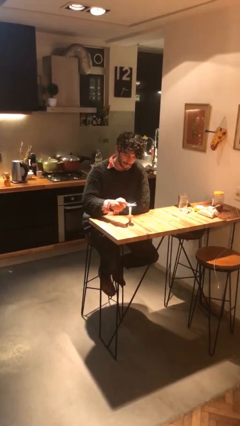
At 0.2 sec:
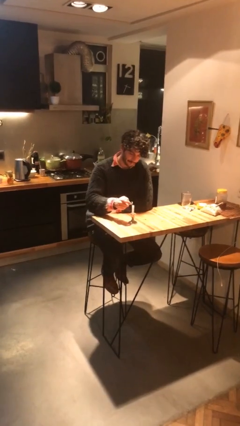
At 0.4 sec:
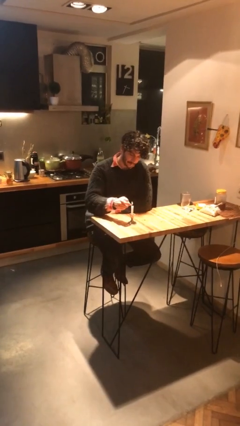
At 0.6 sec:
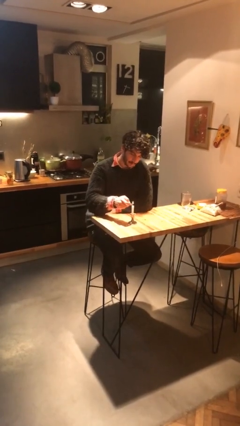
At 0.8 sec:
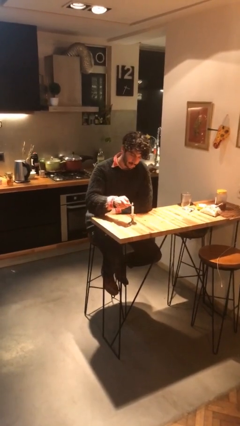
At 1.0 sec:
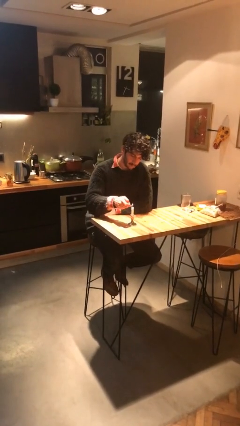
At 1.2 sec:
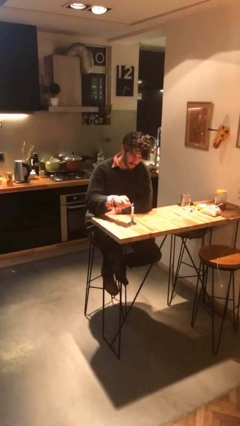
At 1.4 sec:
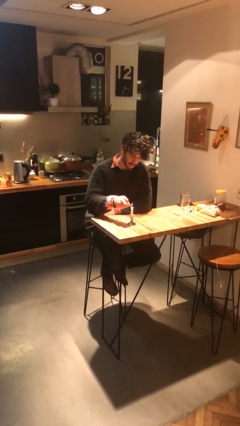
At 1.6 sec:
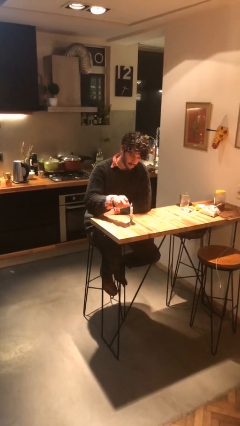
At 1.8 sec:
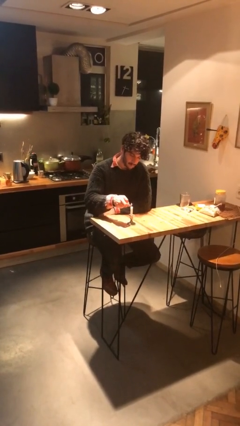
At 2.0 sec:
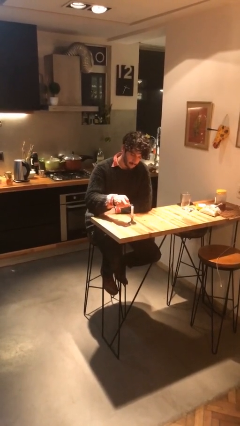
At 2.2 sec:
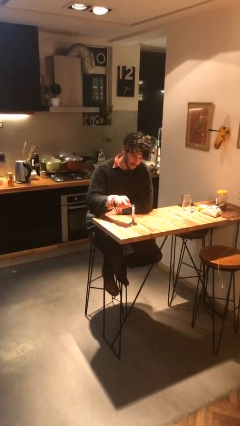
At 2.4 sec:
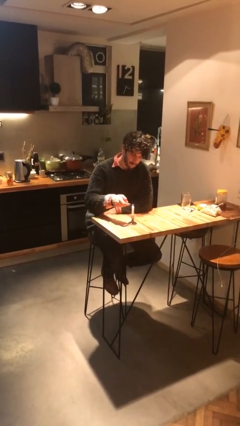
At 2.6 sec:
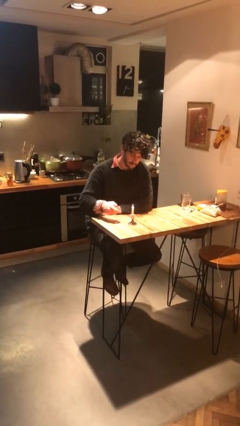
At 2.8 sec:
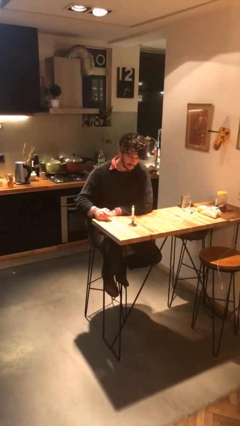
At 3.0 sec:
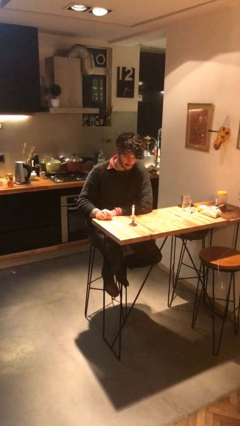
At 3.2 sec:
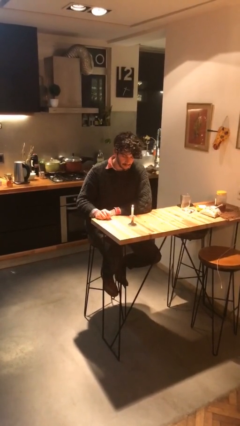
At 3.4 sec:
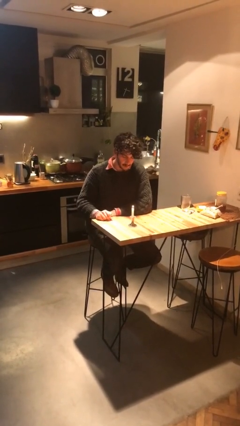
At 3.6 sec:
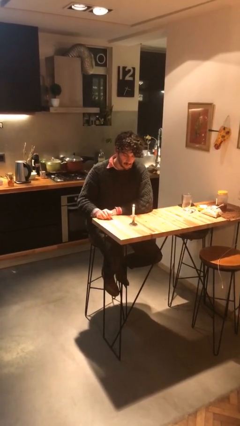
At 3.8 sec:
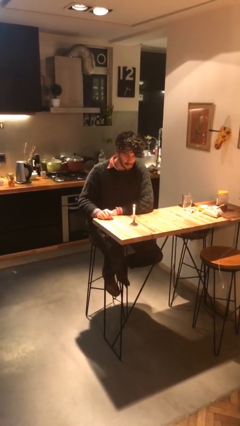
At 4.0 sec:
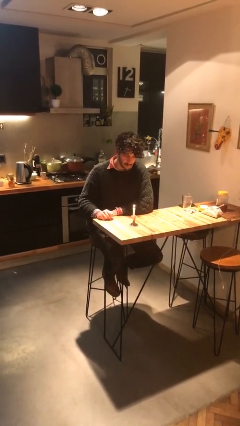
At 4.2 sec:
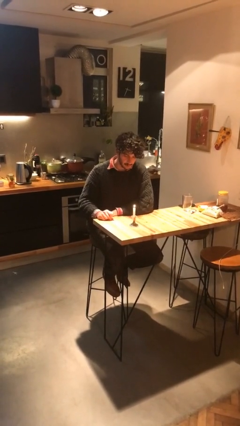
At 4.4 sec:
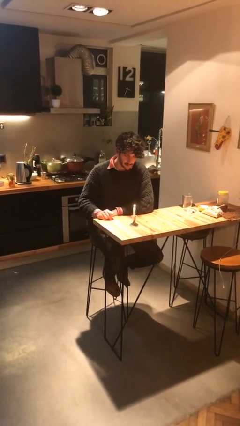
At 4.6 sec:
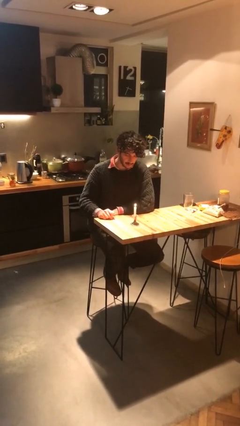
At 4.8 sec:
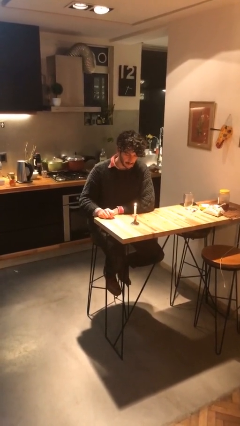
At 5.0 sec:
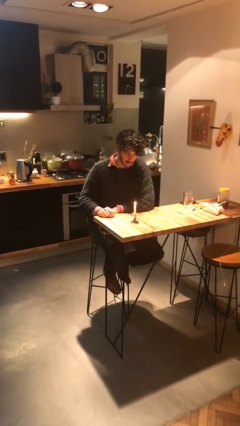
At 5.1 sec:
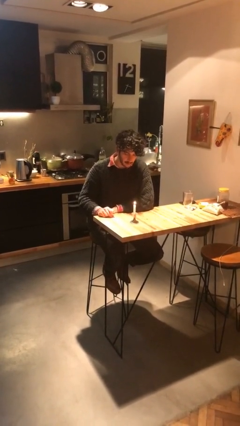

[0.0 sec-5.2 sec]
person lights candle

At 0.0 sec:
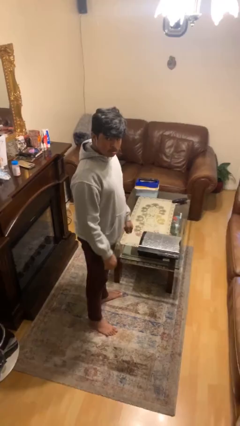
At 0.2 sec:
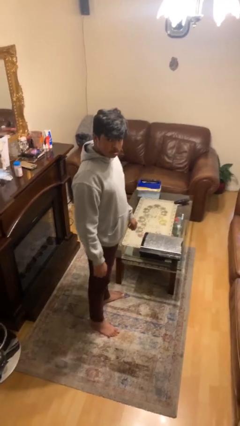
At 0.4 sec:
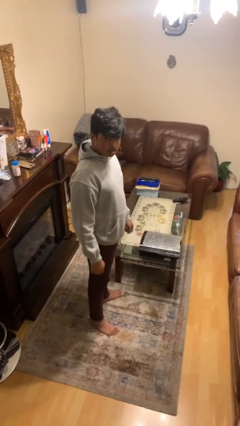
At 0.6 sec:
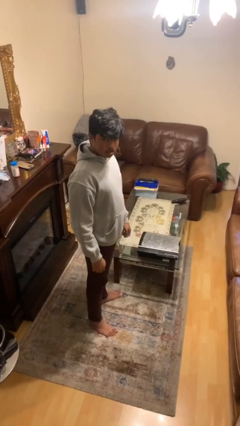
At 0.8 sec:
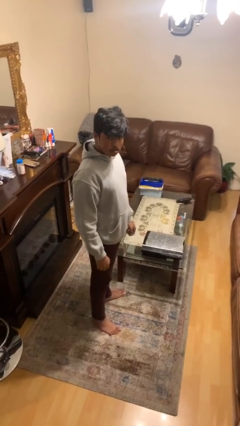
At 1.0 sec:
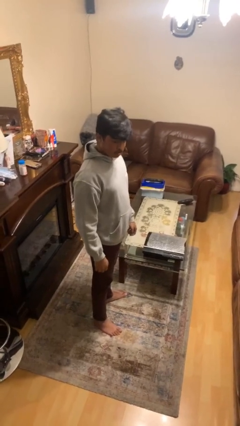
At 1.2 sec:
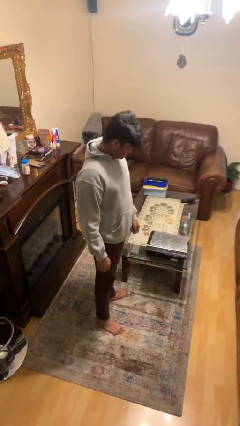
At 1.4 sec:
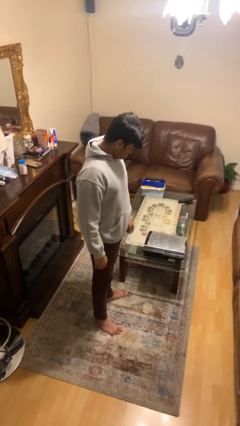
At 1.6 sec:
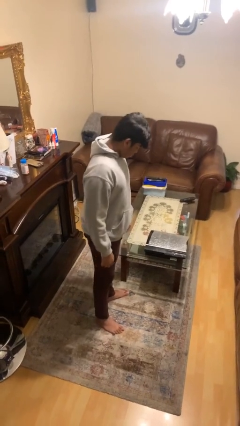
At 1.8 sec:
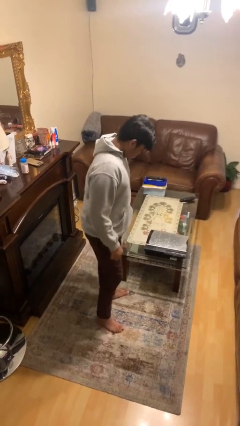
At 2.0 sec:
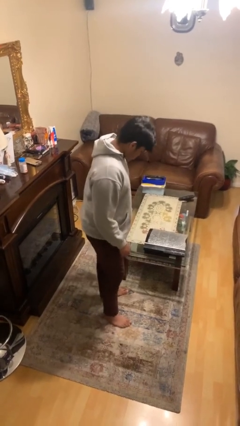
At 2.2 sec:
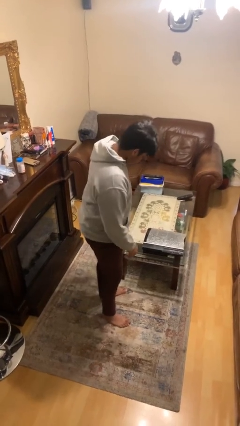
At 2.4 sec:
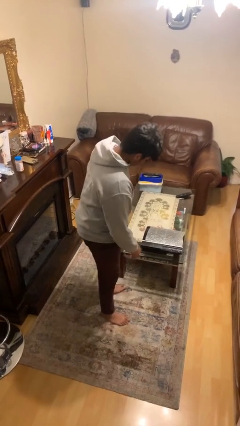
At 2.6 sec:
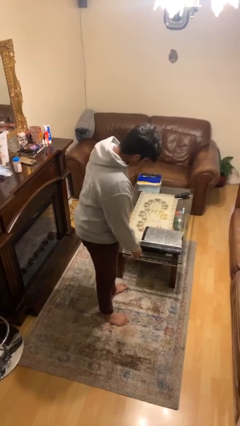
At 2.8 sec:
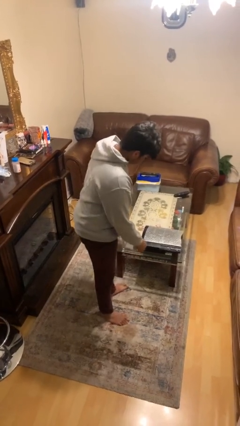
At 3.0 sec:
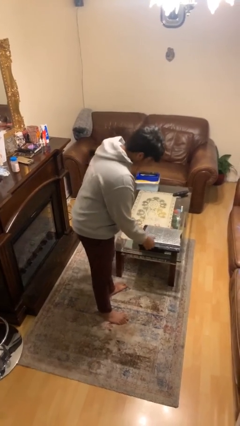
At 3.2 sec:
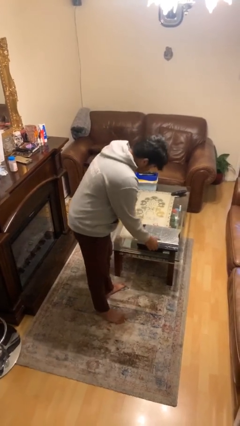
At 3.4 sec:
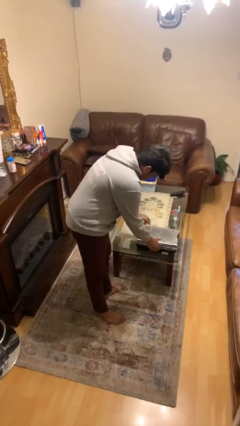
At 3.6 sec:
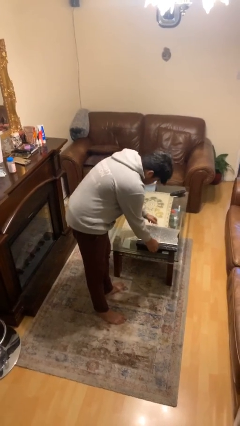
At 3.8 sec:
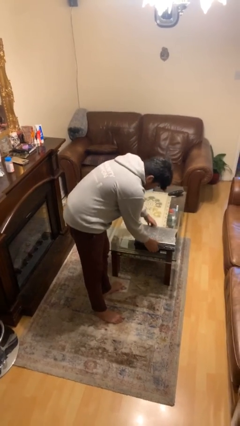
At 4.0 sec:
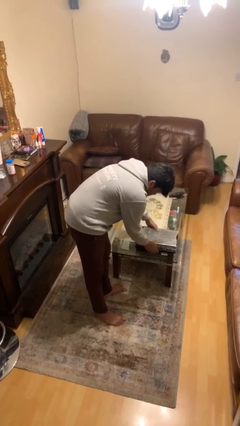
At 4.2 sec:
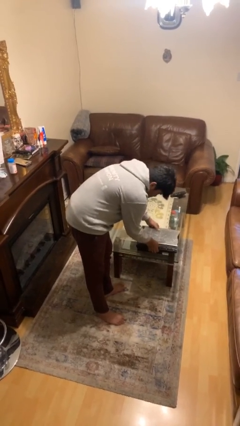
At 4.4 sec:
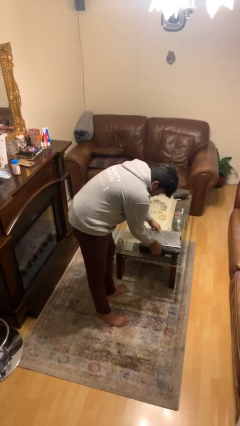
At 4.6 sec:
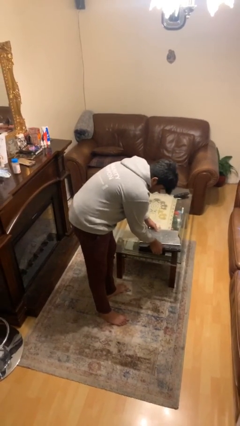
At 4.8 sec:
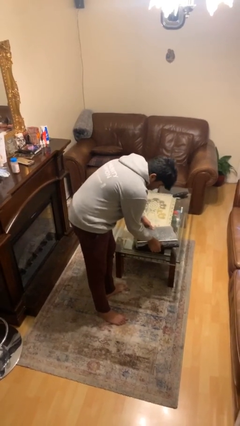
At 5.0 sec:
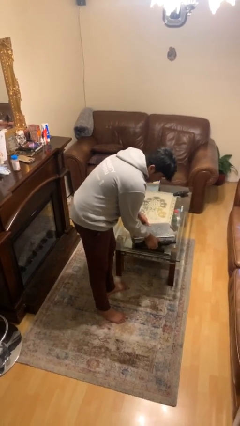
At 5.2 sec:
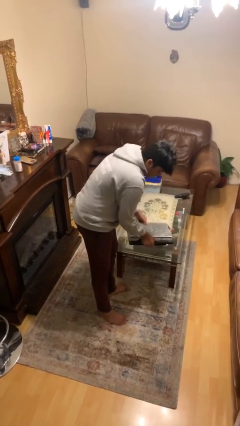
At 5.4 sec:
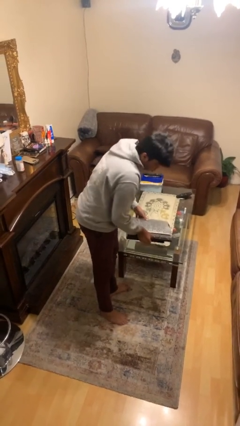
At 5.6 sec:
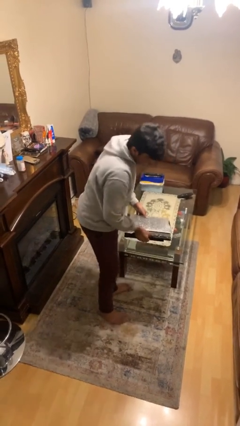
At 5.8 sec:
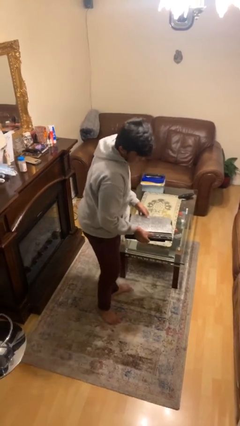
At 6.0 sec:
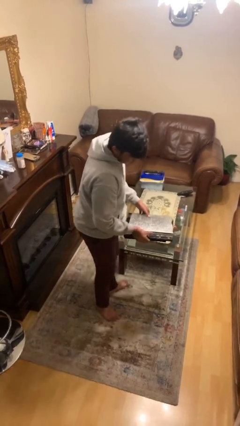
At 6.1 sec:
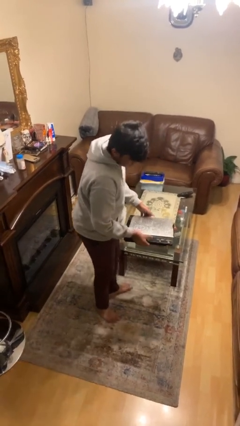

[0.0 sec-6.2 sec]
person picks up object from table

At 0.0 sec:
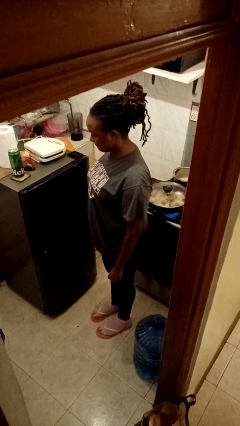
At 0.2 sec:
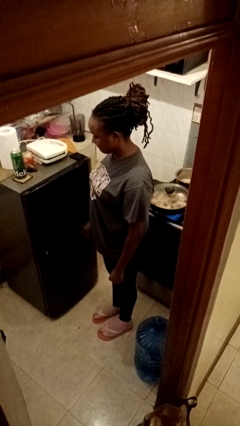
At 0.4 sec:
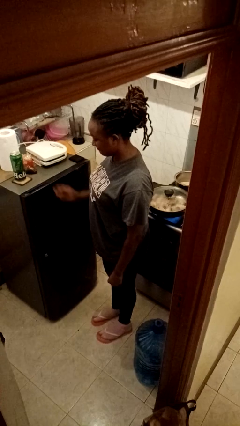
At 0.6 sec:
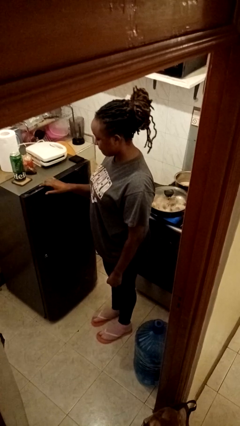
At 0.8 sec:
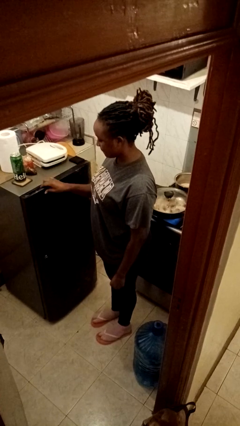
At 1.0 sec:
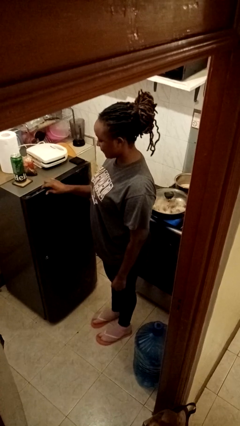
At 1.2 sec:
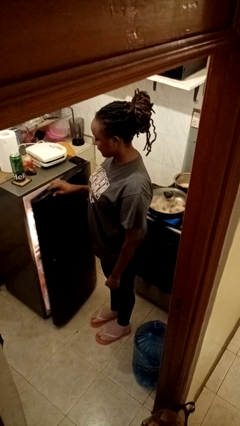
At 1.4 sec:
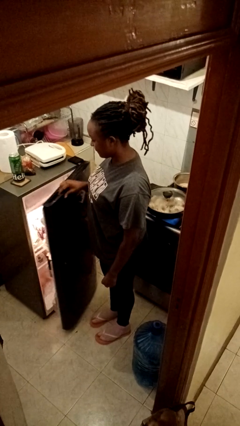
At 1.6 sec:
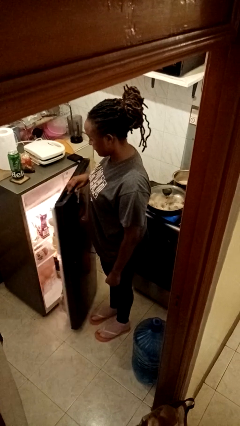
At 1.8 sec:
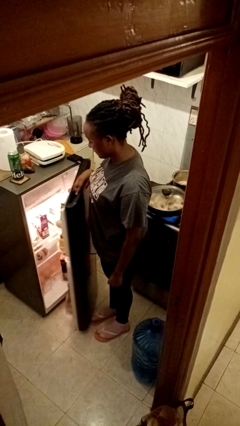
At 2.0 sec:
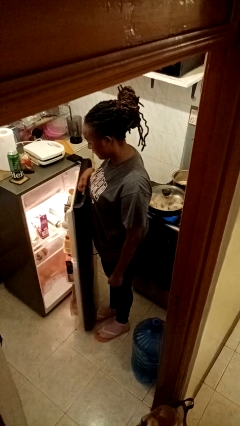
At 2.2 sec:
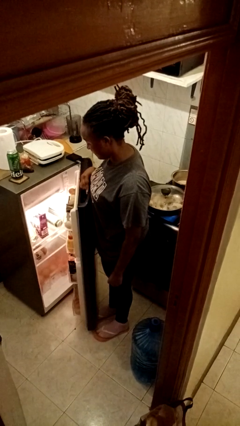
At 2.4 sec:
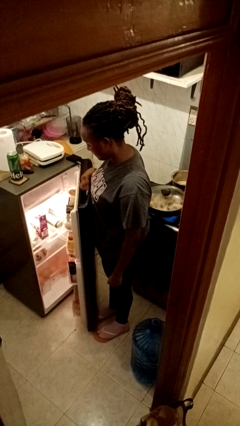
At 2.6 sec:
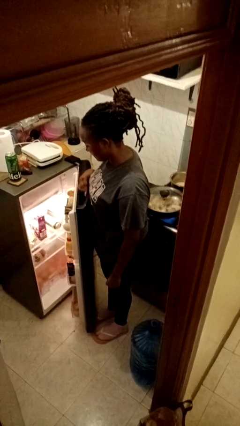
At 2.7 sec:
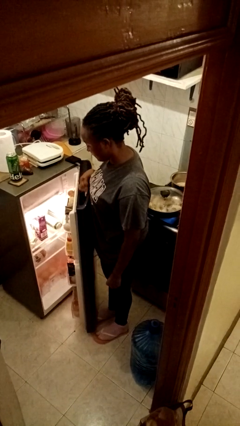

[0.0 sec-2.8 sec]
person opens refrigerator

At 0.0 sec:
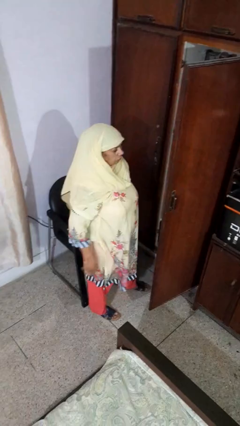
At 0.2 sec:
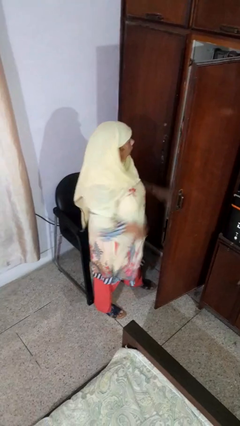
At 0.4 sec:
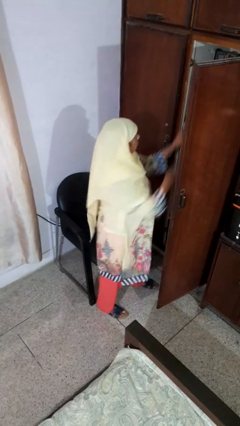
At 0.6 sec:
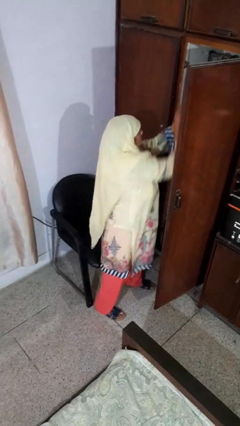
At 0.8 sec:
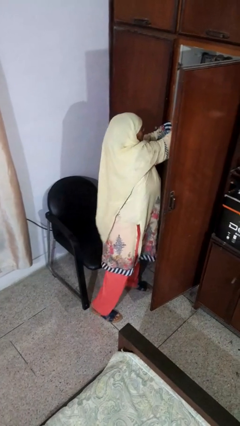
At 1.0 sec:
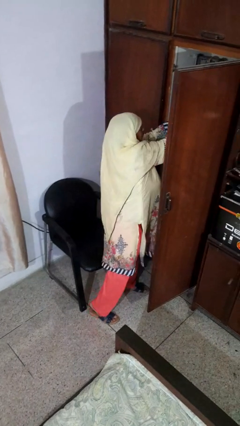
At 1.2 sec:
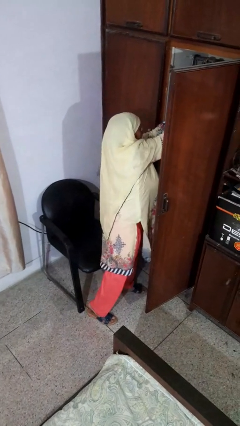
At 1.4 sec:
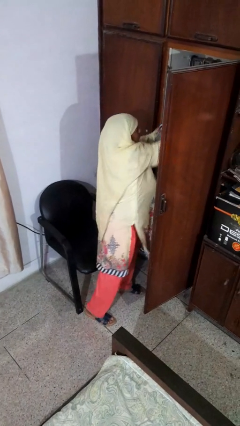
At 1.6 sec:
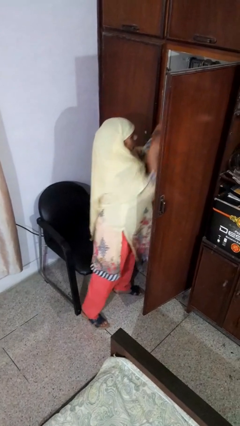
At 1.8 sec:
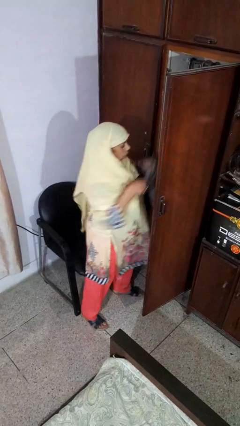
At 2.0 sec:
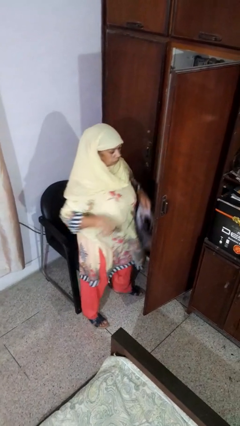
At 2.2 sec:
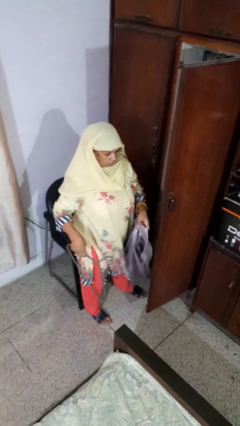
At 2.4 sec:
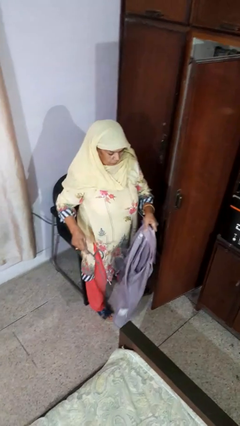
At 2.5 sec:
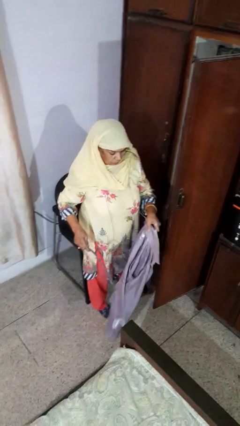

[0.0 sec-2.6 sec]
person takes clothes from closet

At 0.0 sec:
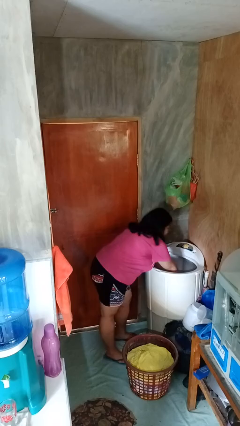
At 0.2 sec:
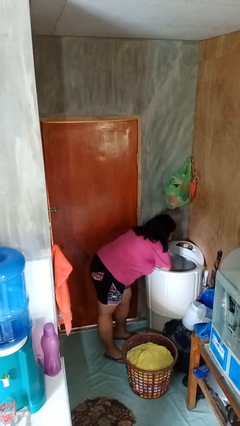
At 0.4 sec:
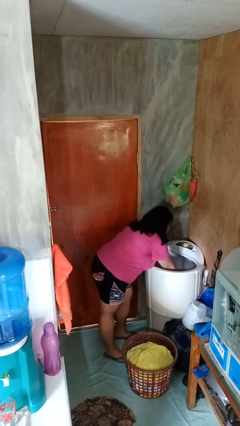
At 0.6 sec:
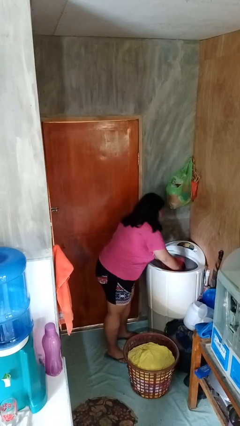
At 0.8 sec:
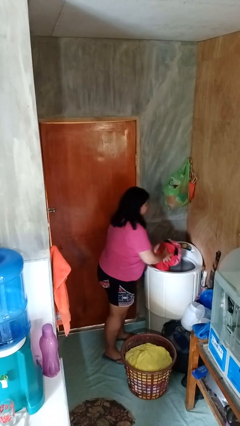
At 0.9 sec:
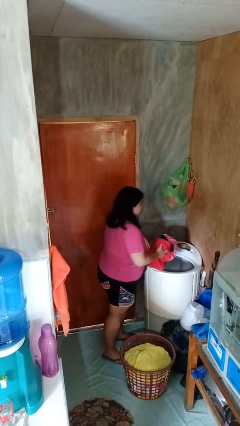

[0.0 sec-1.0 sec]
person unloads clotheswasher
